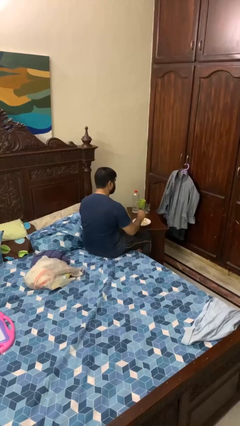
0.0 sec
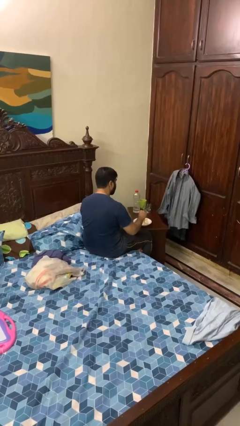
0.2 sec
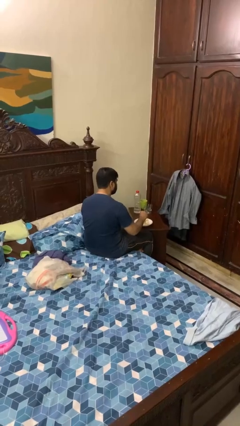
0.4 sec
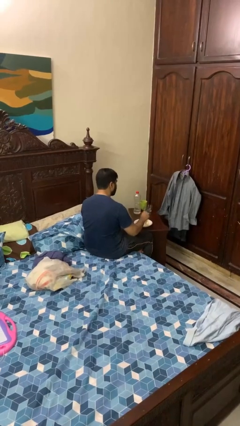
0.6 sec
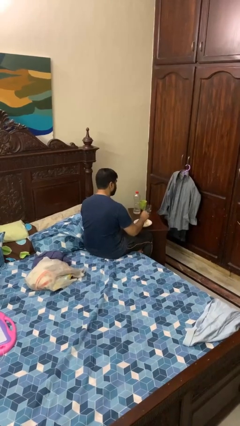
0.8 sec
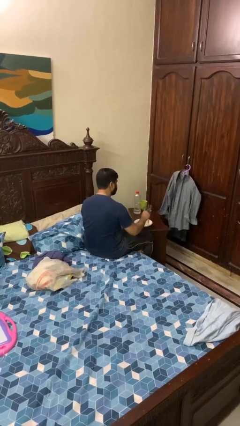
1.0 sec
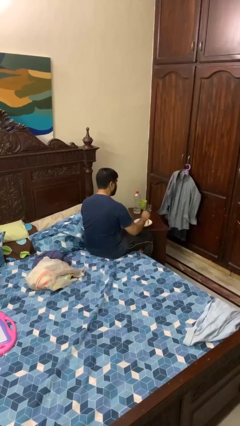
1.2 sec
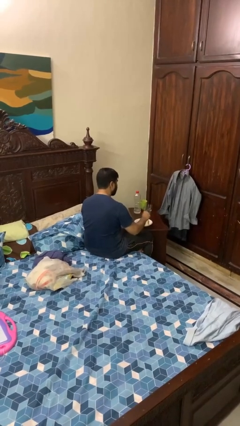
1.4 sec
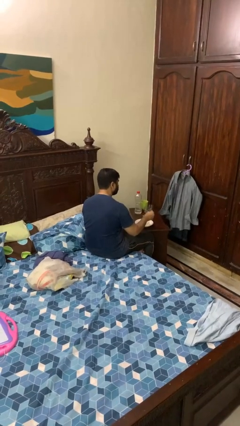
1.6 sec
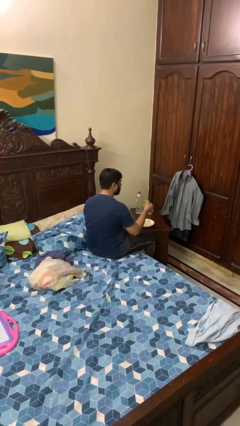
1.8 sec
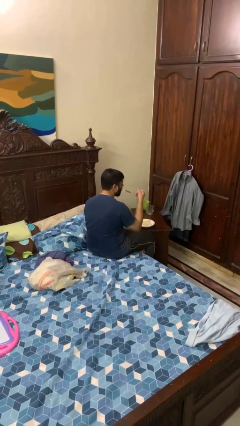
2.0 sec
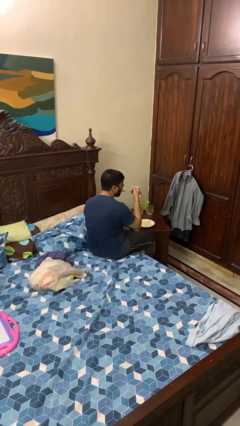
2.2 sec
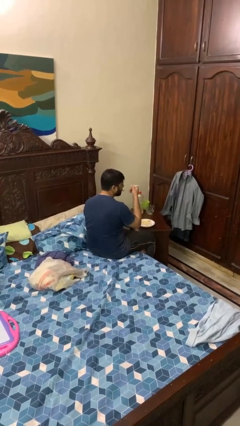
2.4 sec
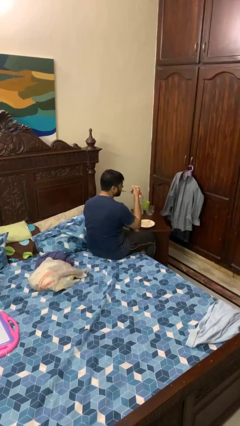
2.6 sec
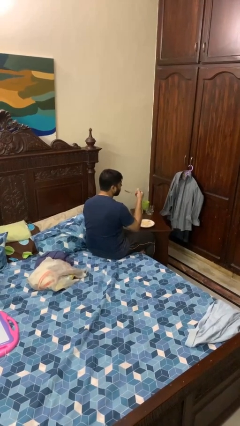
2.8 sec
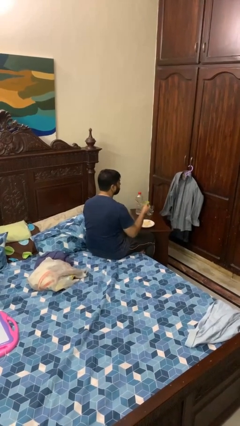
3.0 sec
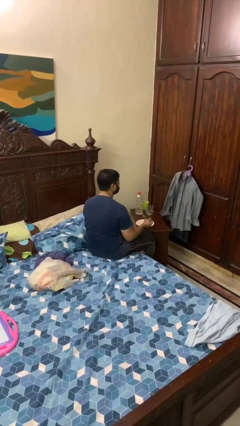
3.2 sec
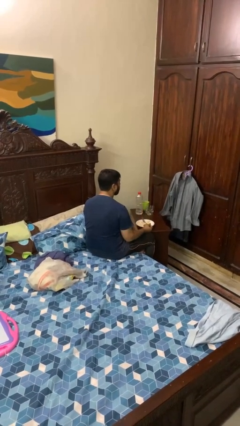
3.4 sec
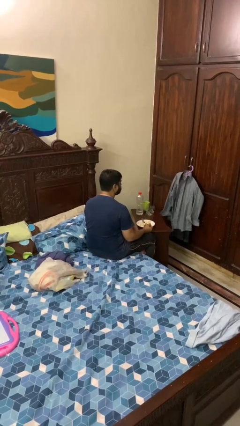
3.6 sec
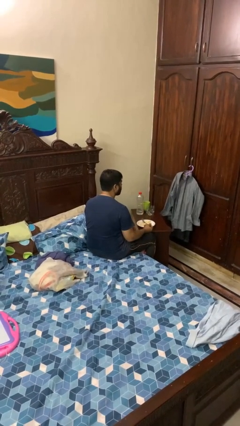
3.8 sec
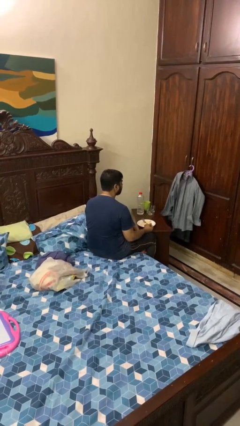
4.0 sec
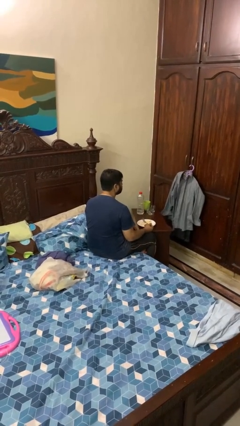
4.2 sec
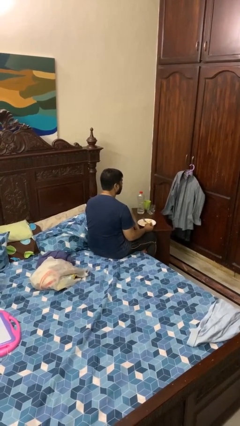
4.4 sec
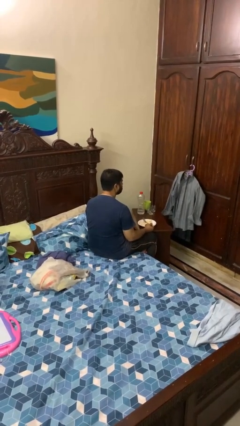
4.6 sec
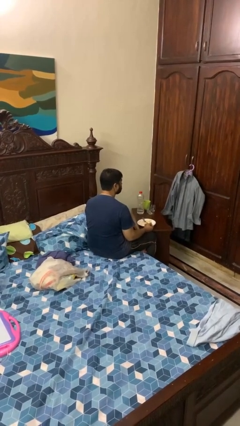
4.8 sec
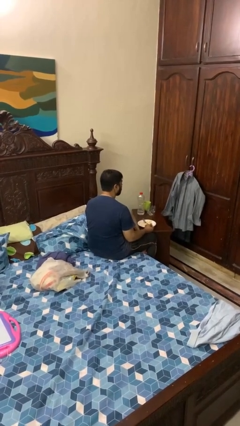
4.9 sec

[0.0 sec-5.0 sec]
person eats with utensil

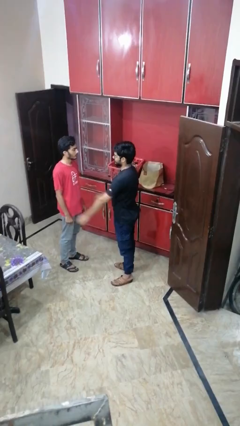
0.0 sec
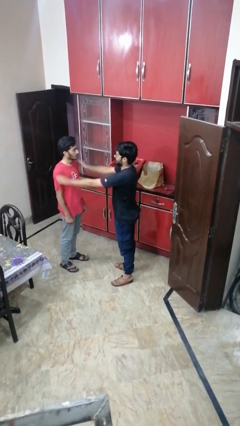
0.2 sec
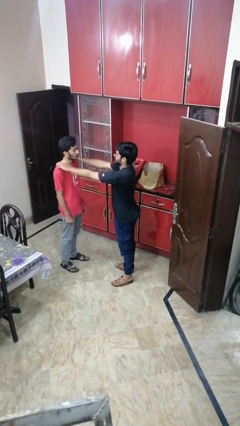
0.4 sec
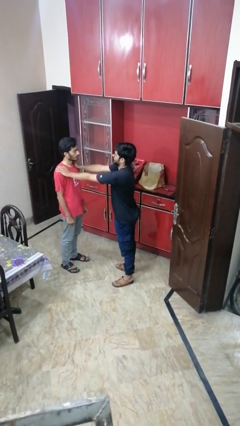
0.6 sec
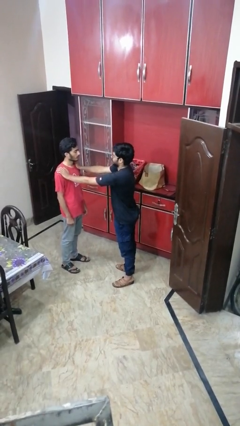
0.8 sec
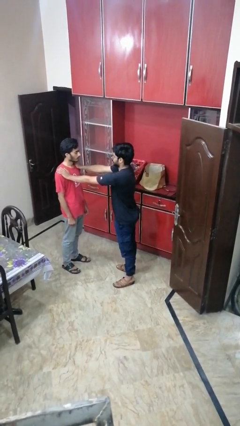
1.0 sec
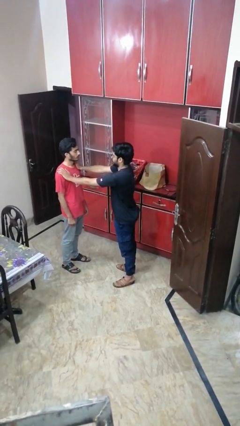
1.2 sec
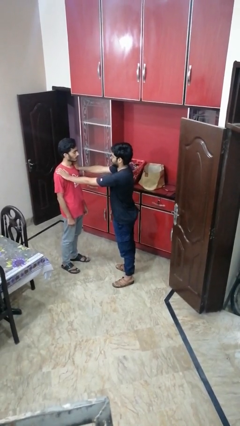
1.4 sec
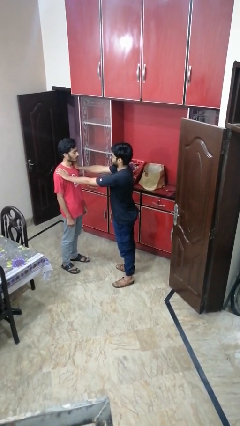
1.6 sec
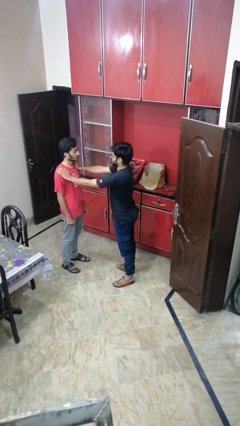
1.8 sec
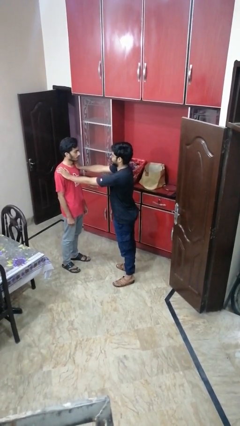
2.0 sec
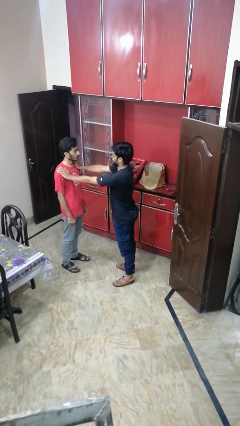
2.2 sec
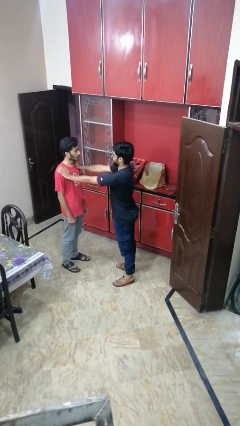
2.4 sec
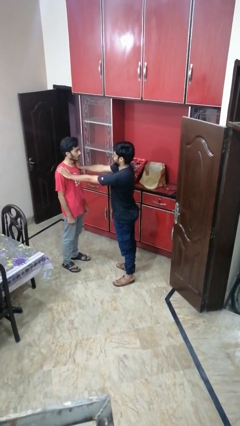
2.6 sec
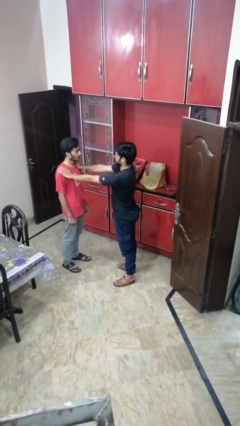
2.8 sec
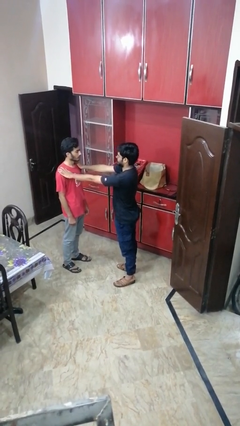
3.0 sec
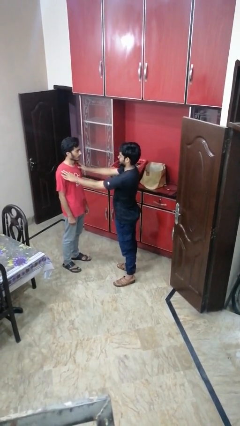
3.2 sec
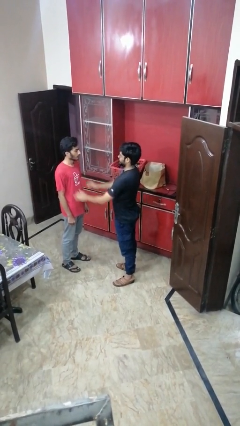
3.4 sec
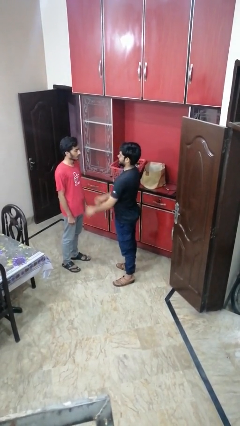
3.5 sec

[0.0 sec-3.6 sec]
person pounds shoulders of person

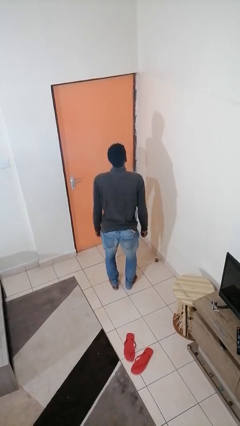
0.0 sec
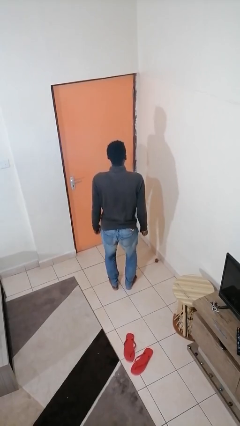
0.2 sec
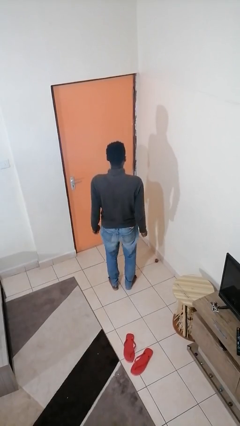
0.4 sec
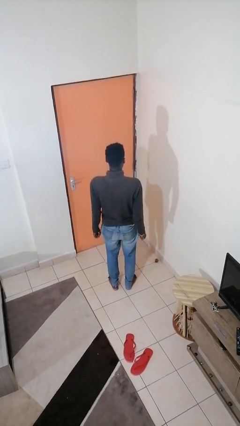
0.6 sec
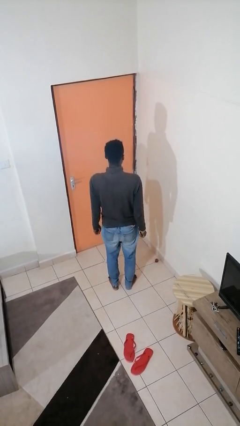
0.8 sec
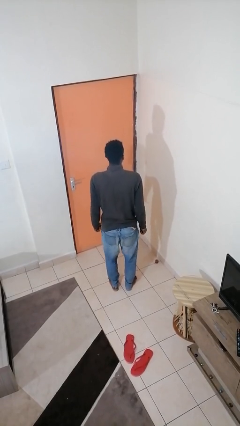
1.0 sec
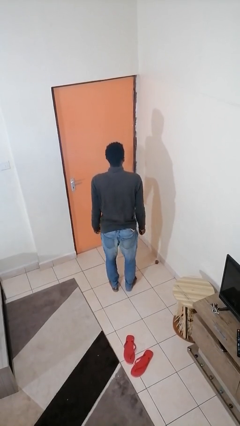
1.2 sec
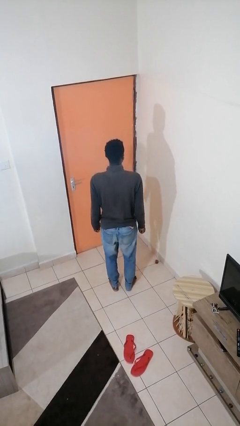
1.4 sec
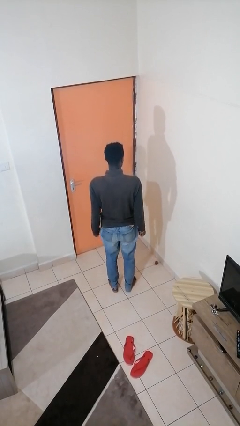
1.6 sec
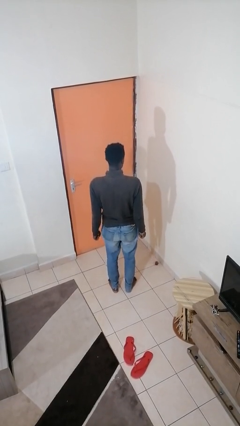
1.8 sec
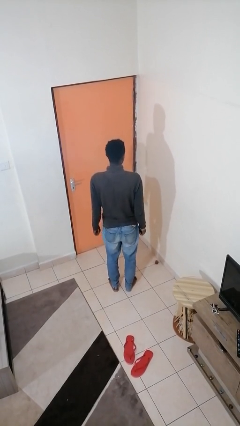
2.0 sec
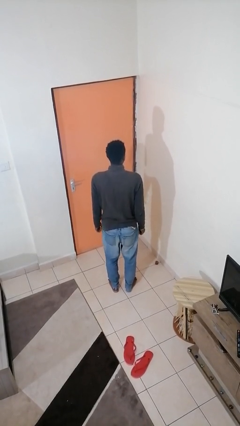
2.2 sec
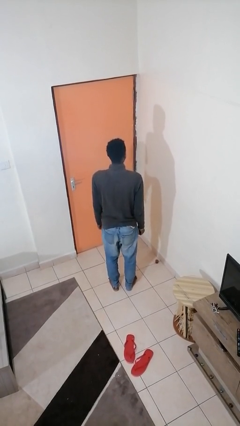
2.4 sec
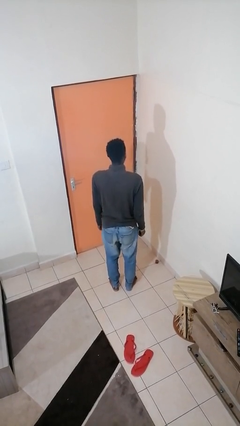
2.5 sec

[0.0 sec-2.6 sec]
person wiggles hips

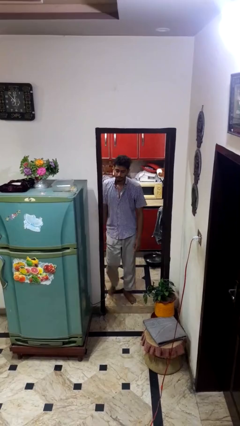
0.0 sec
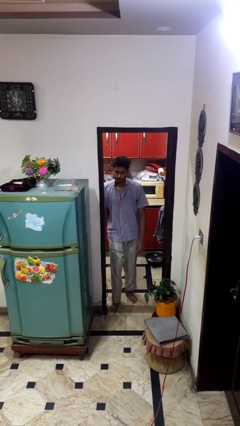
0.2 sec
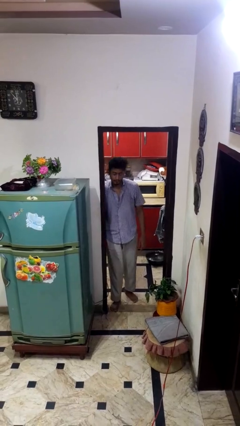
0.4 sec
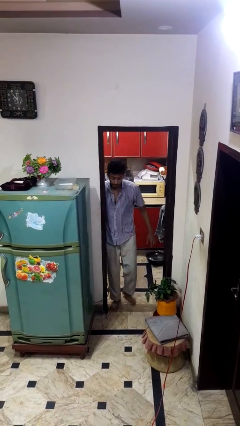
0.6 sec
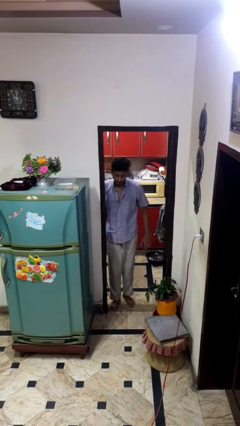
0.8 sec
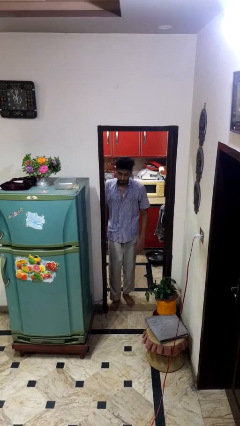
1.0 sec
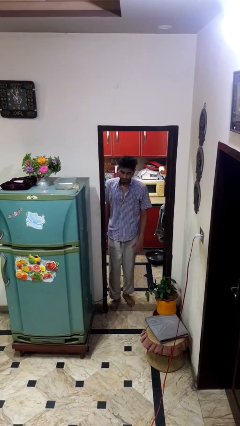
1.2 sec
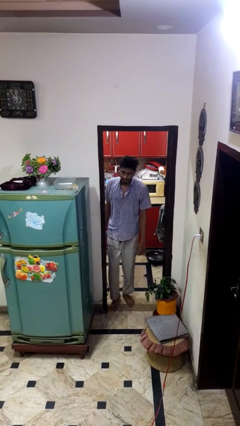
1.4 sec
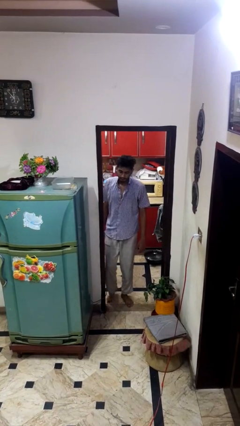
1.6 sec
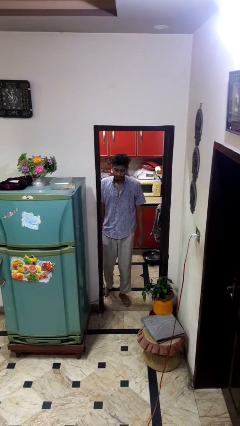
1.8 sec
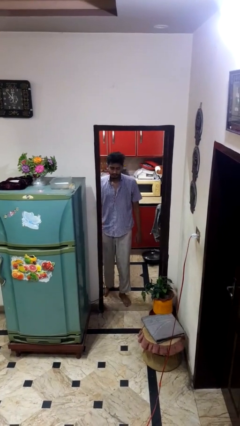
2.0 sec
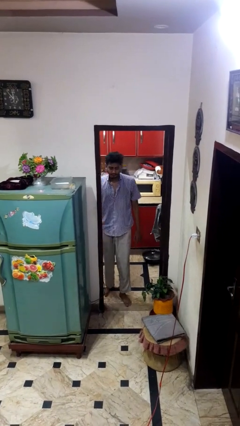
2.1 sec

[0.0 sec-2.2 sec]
person bumps into wall

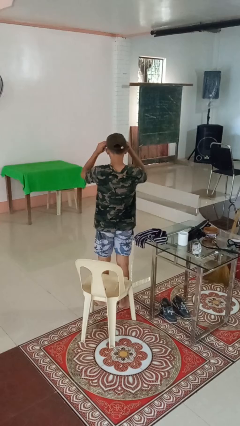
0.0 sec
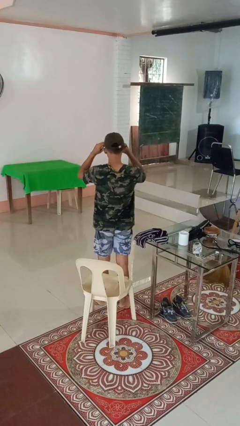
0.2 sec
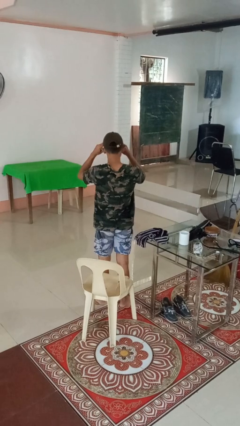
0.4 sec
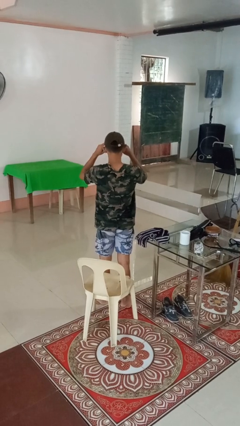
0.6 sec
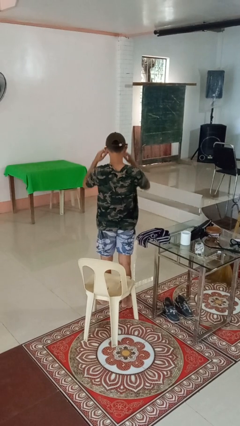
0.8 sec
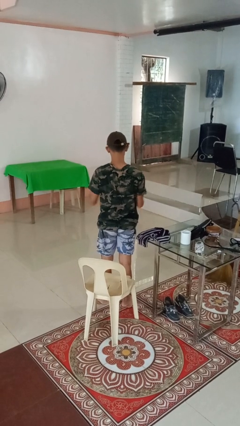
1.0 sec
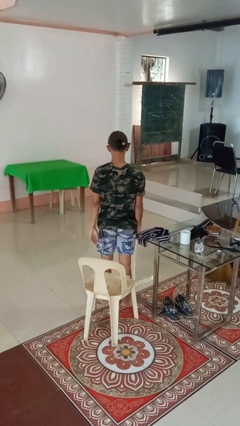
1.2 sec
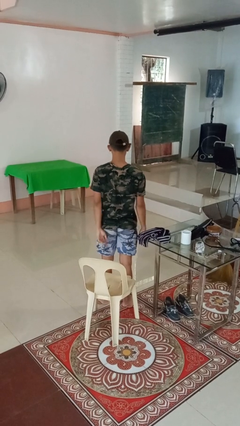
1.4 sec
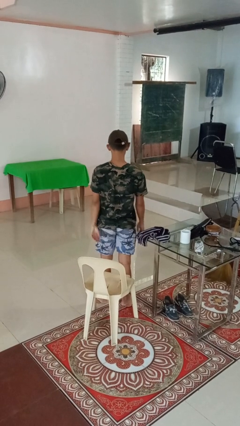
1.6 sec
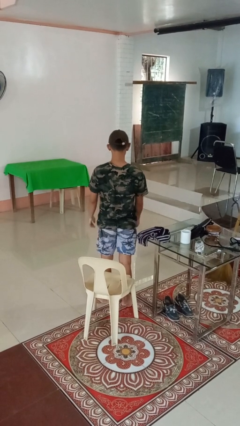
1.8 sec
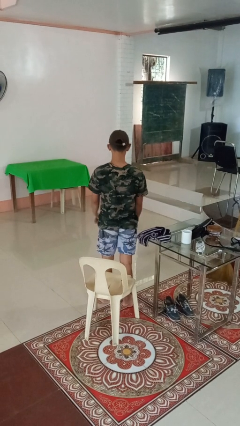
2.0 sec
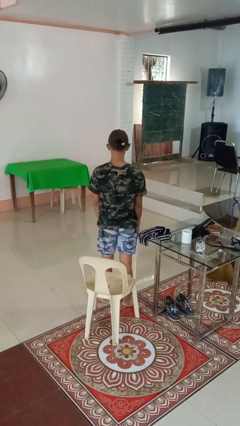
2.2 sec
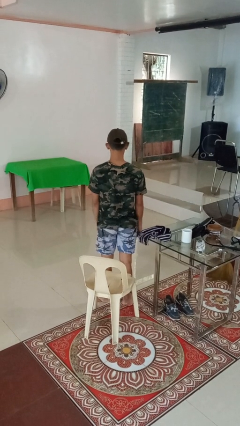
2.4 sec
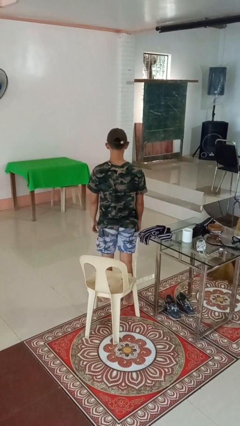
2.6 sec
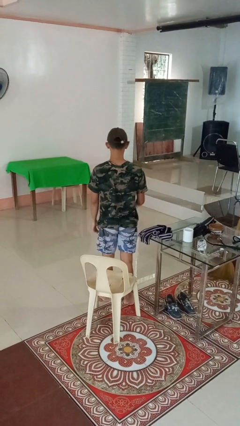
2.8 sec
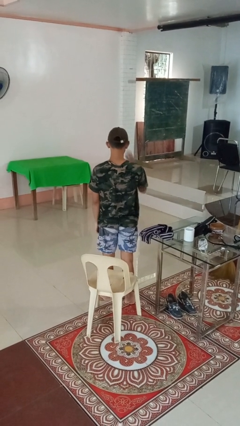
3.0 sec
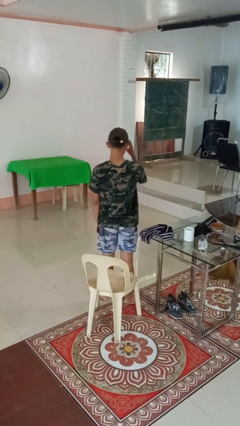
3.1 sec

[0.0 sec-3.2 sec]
person puts on hat

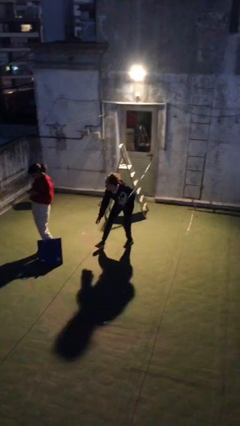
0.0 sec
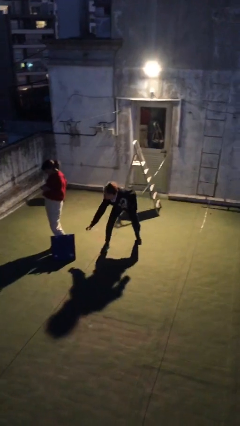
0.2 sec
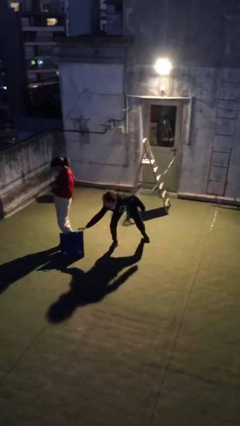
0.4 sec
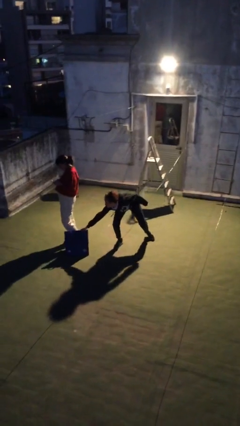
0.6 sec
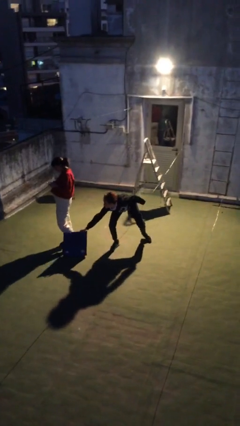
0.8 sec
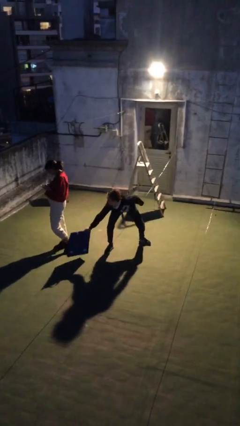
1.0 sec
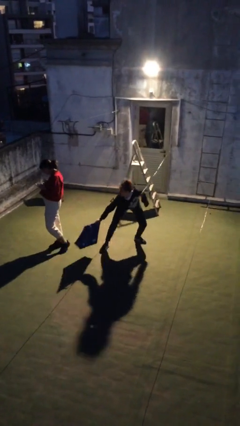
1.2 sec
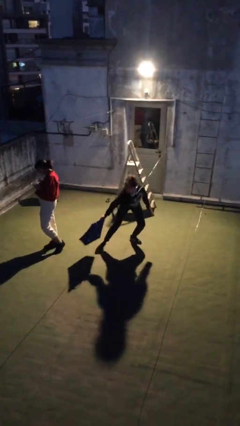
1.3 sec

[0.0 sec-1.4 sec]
person steals object from person
